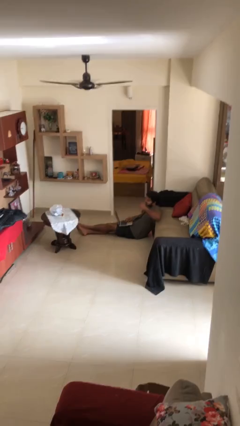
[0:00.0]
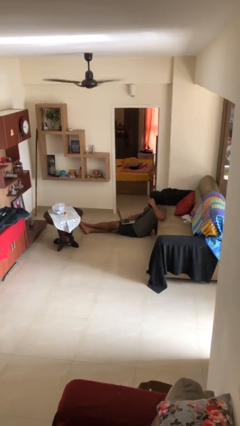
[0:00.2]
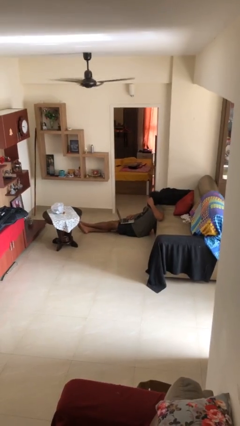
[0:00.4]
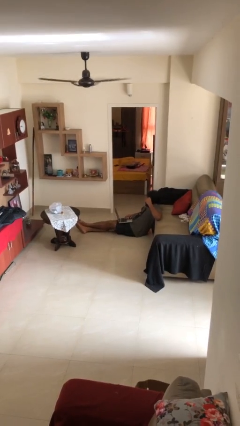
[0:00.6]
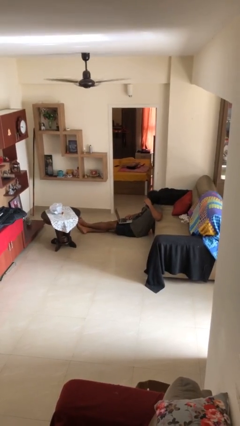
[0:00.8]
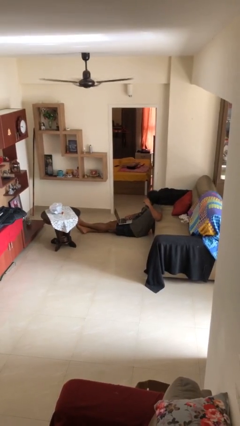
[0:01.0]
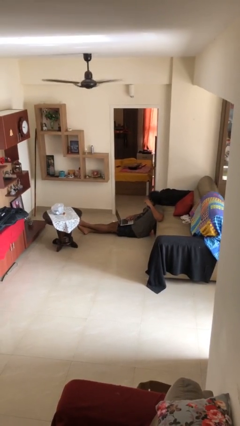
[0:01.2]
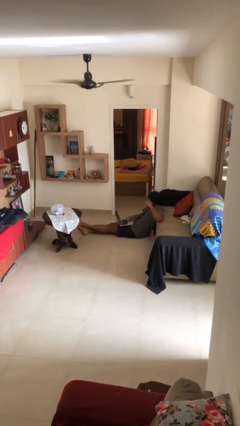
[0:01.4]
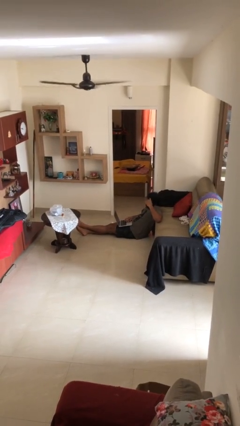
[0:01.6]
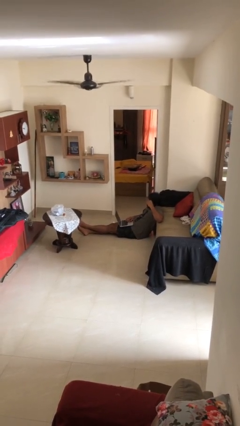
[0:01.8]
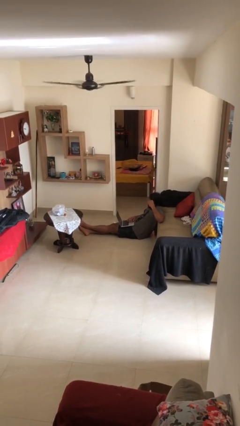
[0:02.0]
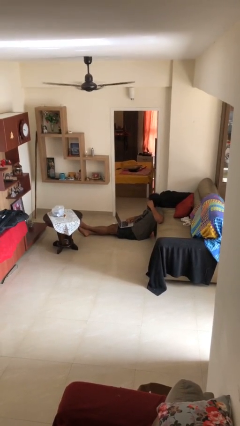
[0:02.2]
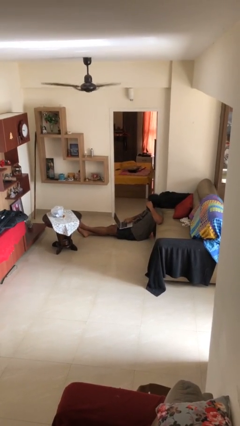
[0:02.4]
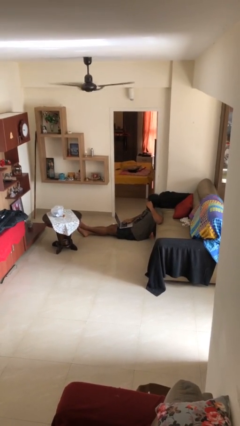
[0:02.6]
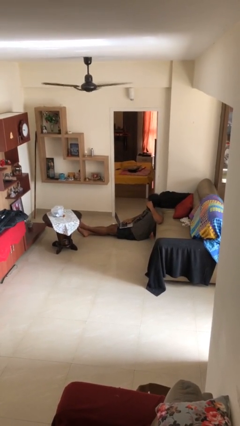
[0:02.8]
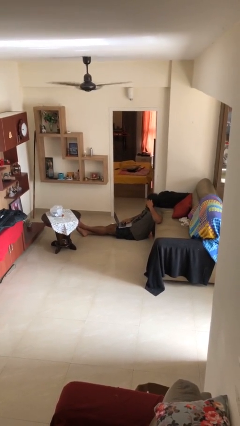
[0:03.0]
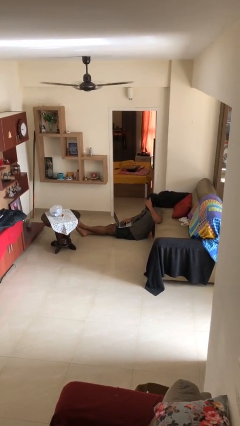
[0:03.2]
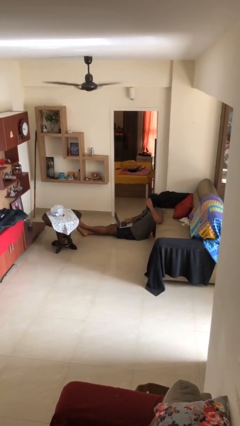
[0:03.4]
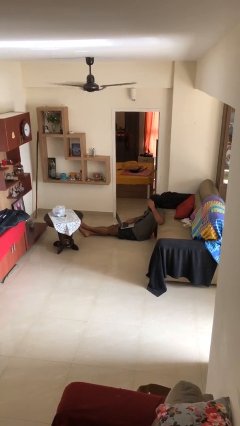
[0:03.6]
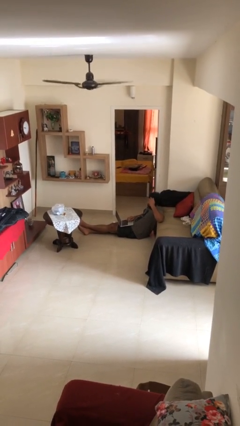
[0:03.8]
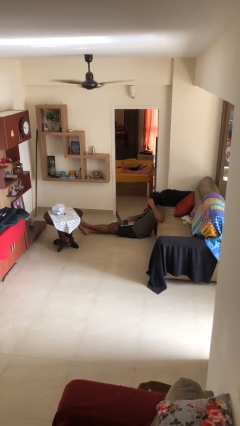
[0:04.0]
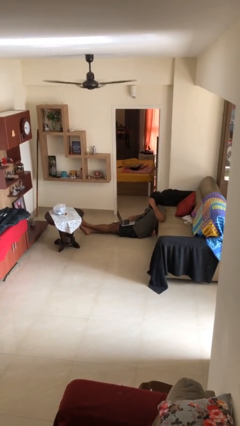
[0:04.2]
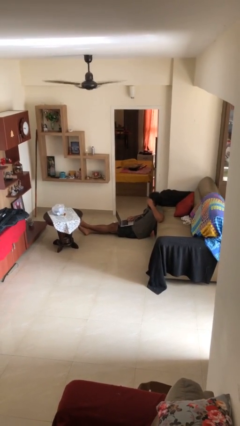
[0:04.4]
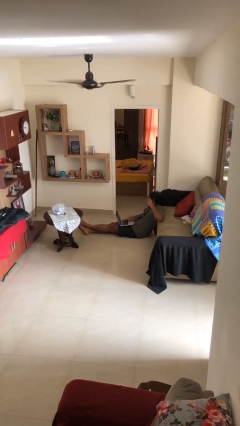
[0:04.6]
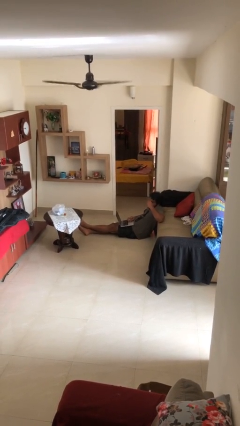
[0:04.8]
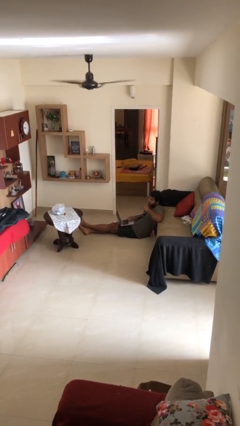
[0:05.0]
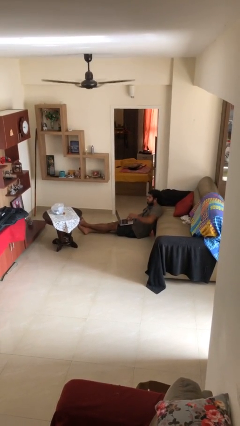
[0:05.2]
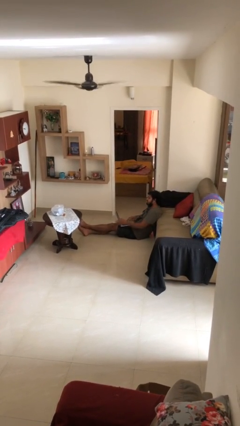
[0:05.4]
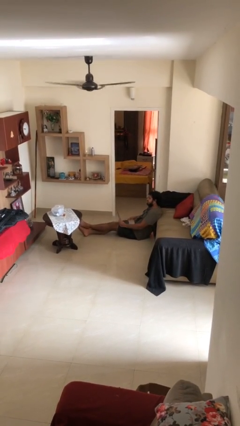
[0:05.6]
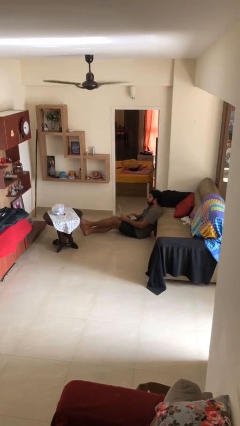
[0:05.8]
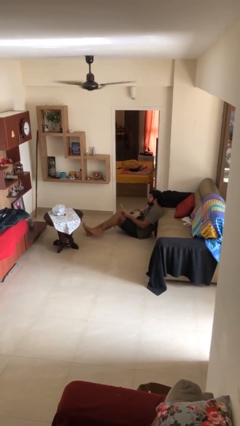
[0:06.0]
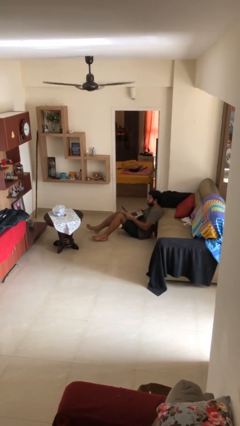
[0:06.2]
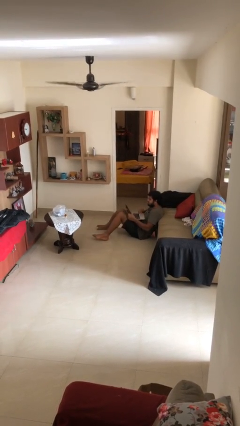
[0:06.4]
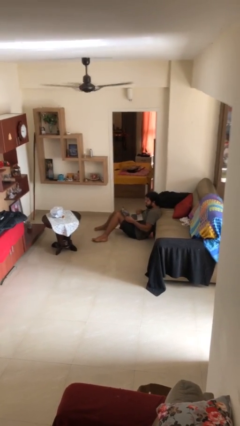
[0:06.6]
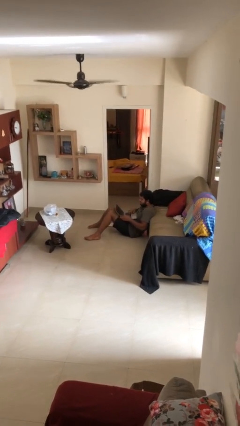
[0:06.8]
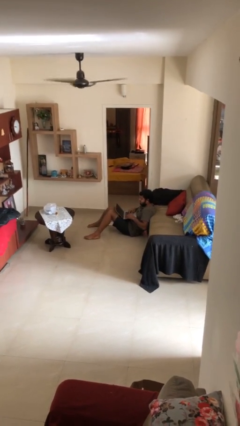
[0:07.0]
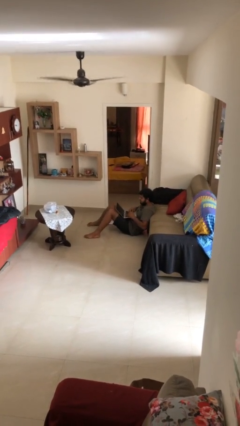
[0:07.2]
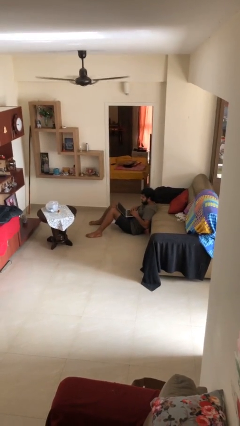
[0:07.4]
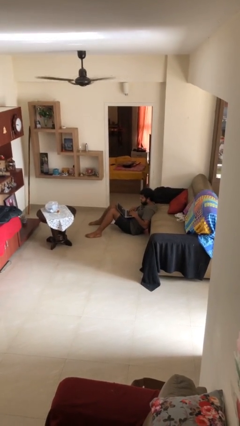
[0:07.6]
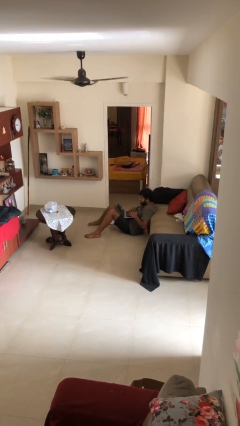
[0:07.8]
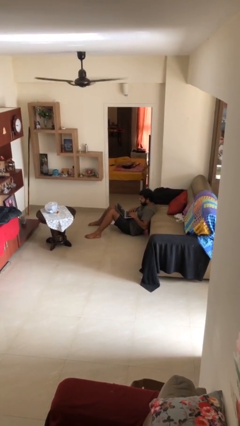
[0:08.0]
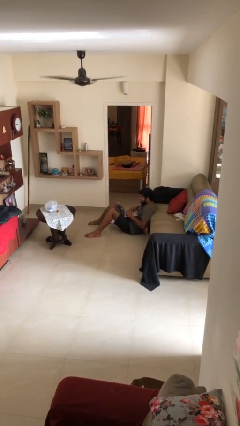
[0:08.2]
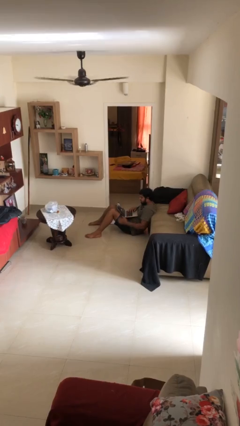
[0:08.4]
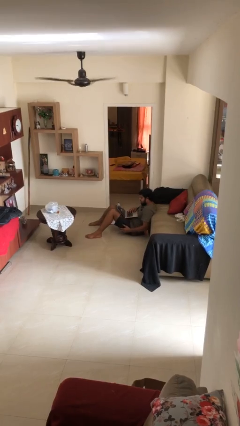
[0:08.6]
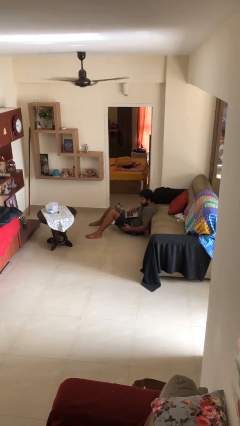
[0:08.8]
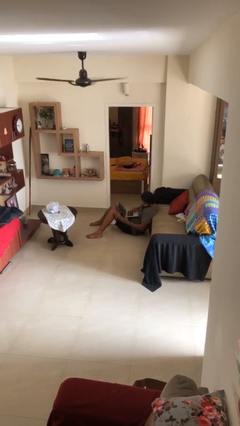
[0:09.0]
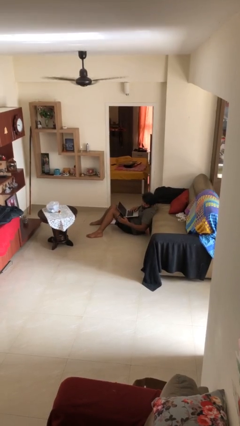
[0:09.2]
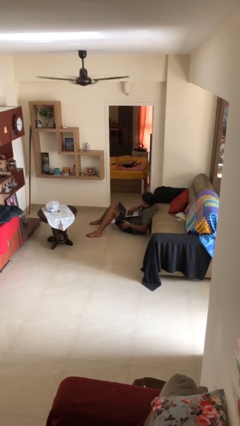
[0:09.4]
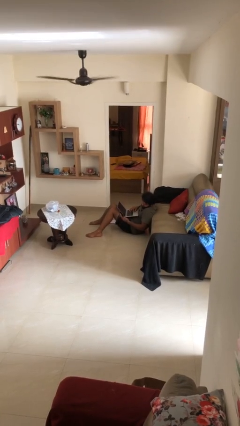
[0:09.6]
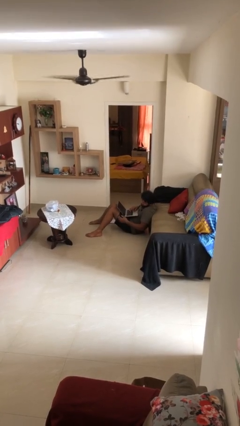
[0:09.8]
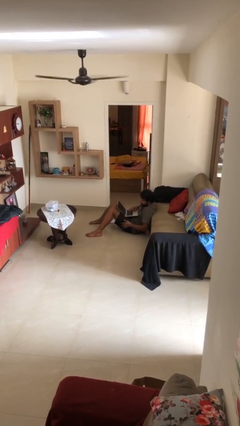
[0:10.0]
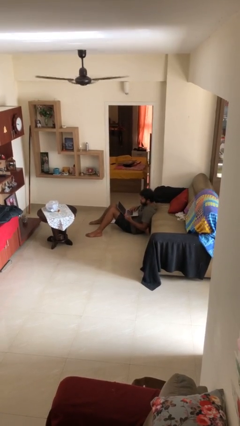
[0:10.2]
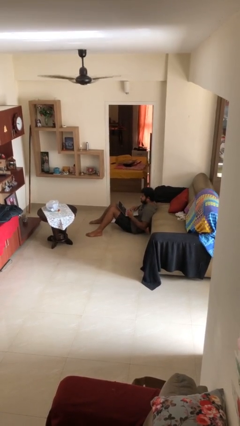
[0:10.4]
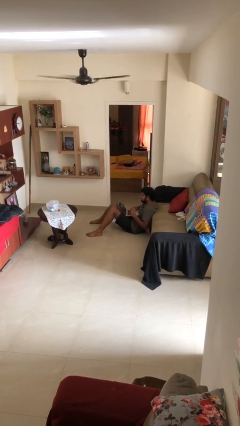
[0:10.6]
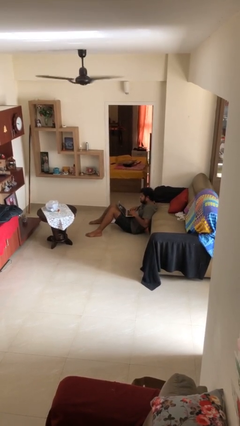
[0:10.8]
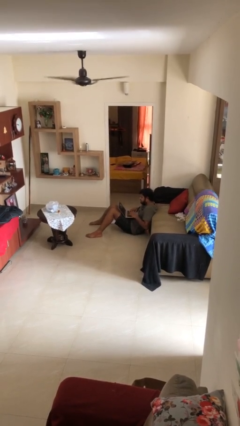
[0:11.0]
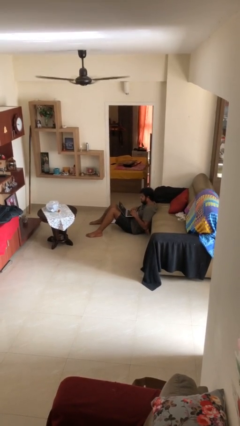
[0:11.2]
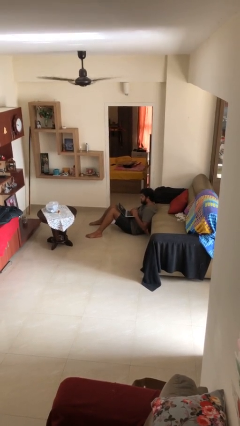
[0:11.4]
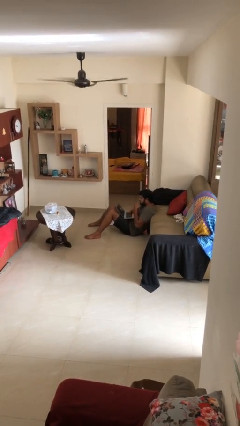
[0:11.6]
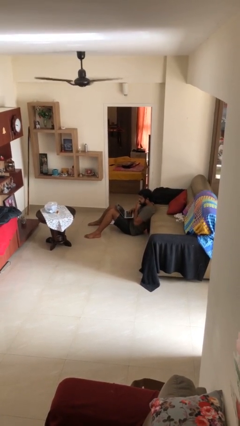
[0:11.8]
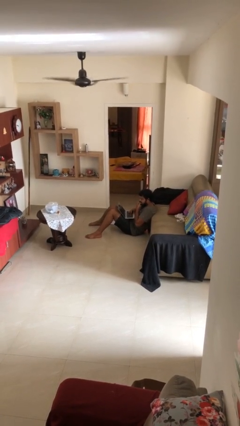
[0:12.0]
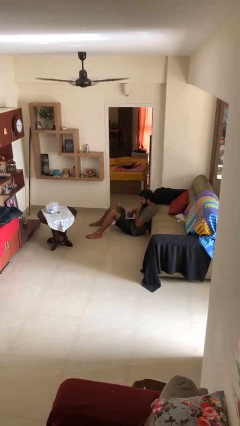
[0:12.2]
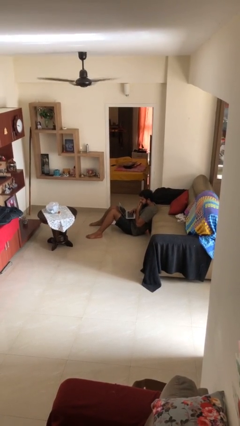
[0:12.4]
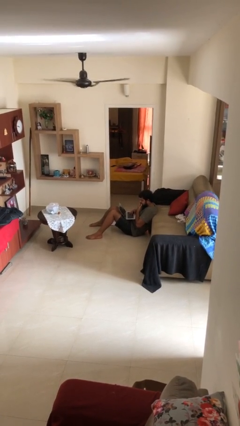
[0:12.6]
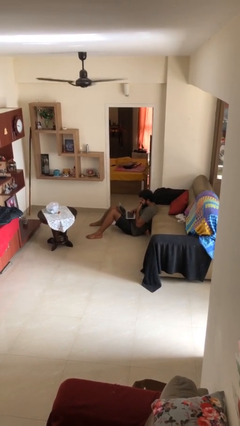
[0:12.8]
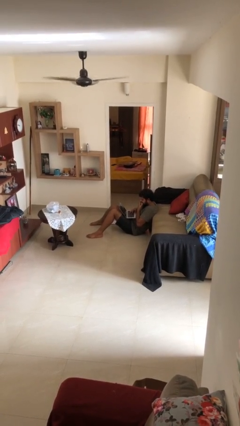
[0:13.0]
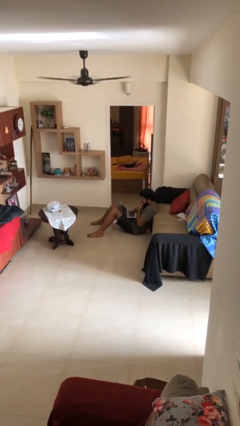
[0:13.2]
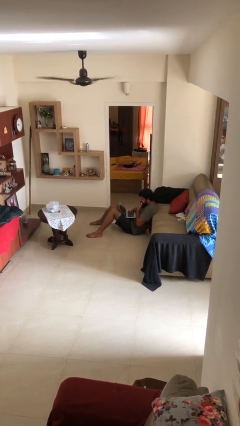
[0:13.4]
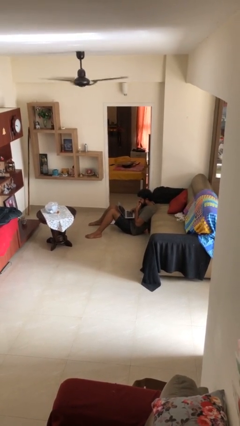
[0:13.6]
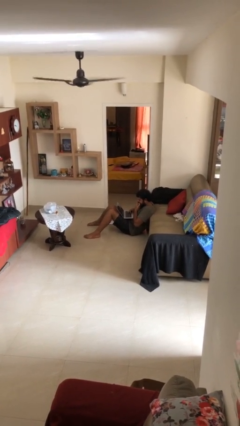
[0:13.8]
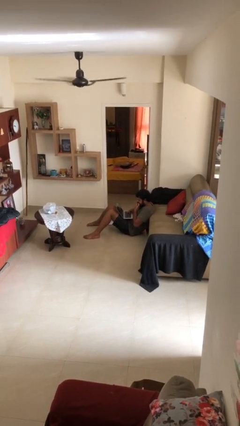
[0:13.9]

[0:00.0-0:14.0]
person interacts with laptop

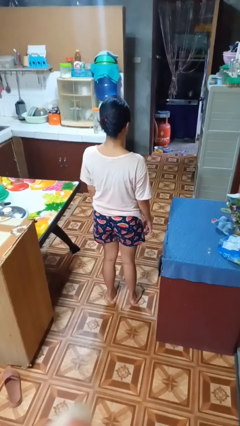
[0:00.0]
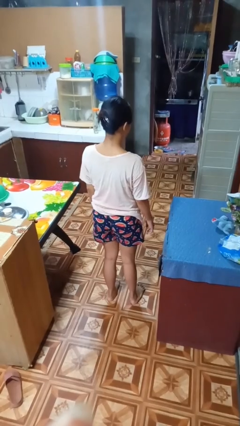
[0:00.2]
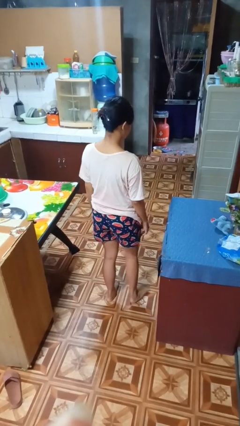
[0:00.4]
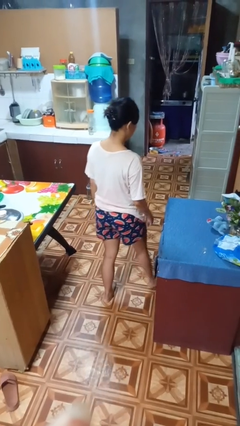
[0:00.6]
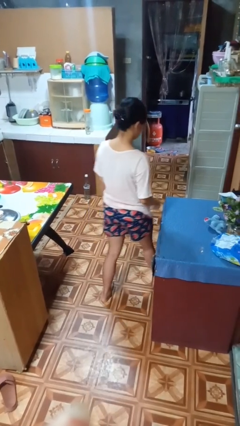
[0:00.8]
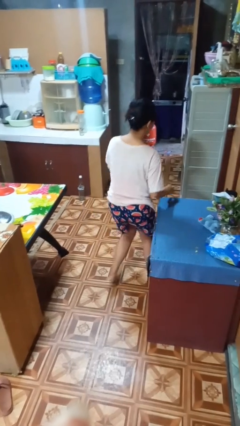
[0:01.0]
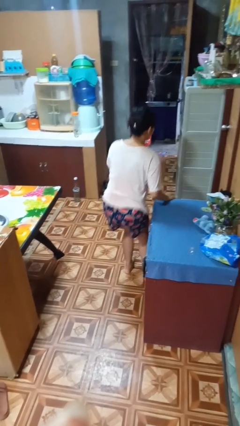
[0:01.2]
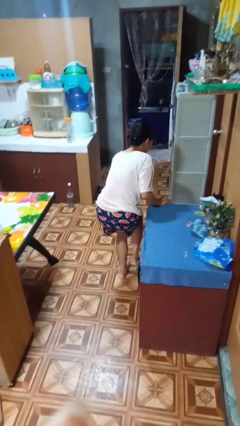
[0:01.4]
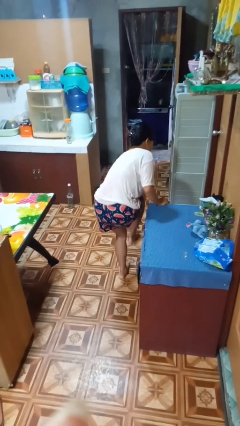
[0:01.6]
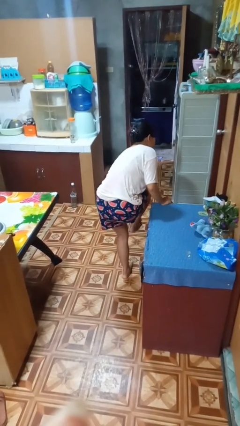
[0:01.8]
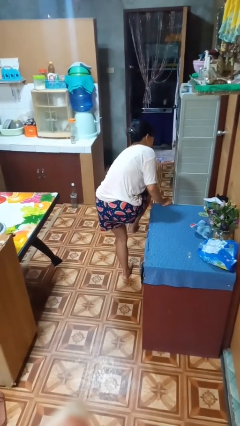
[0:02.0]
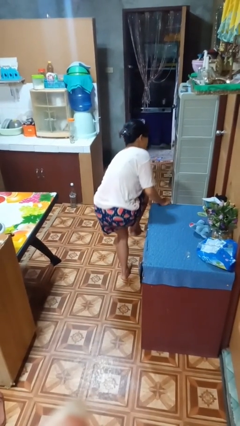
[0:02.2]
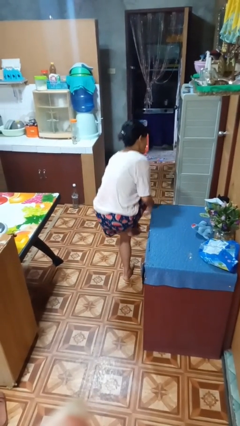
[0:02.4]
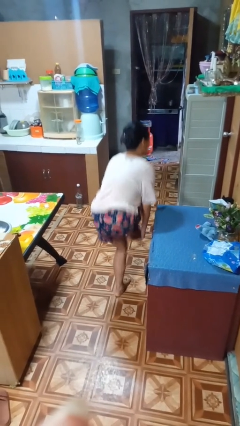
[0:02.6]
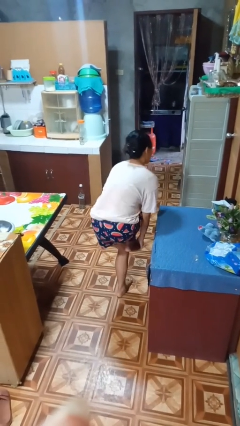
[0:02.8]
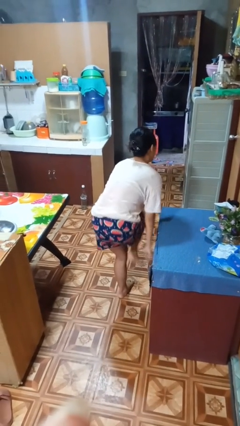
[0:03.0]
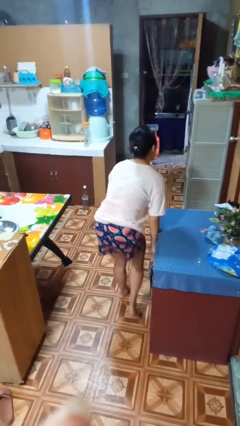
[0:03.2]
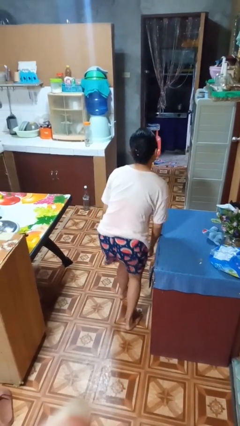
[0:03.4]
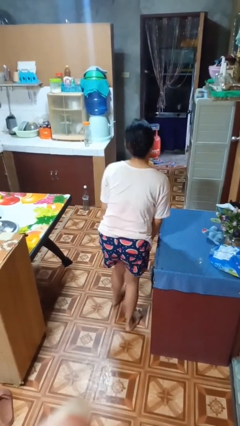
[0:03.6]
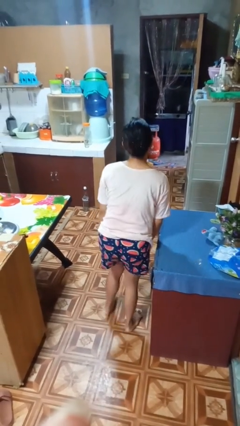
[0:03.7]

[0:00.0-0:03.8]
person stubs toe

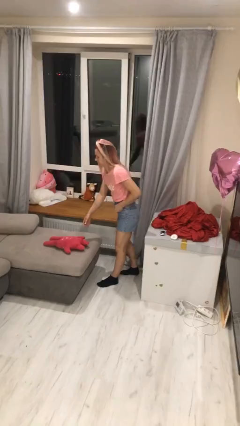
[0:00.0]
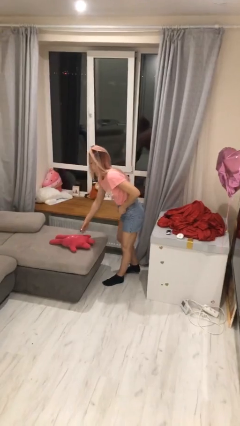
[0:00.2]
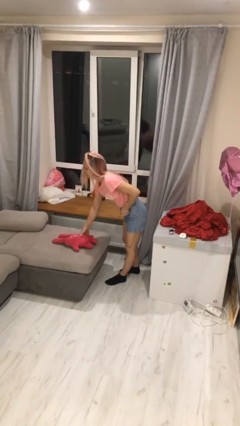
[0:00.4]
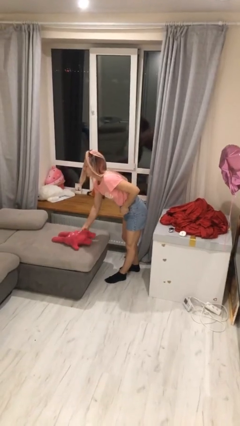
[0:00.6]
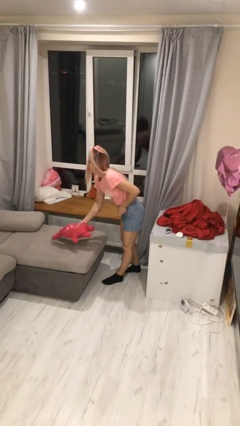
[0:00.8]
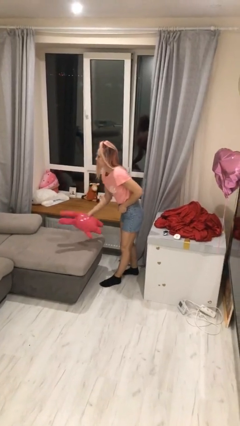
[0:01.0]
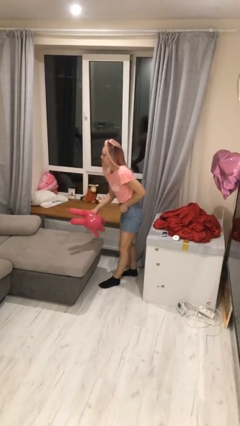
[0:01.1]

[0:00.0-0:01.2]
person picks up object from bed
